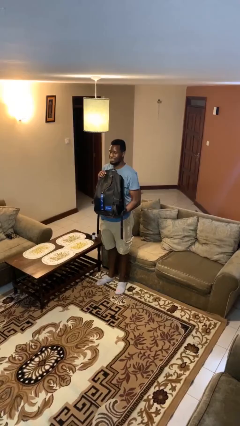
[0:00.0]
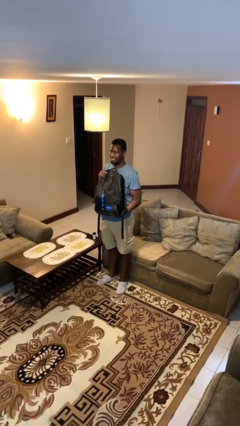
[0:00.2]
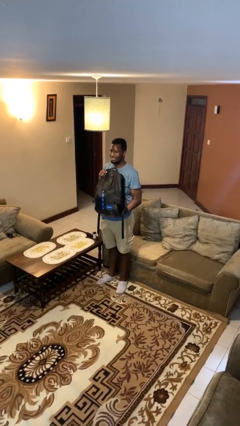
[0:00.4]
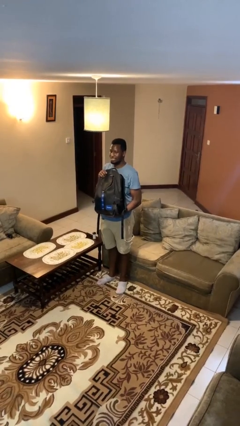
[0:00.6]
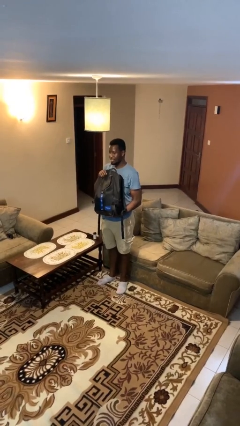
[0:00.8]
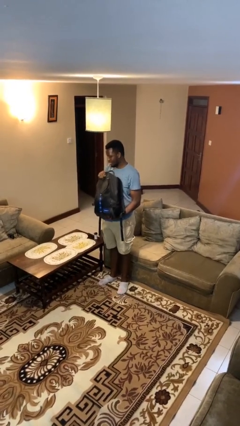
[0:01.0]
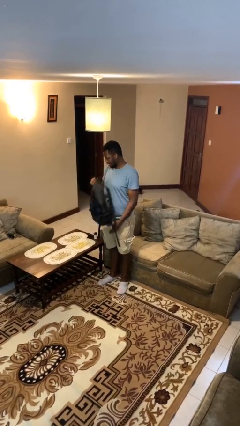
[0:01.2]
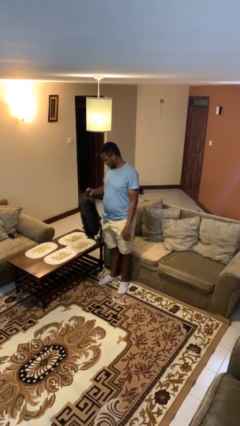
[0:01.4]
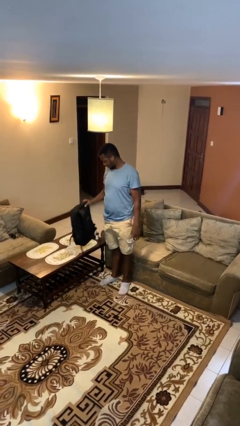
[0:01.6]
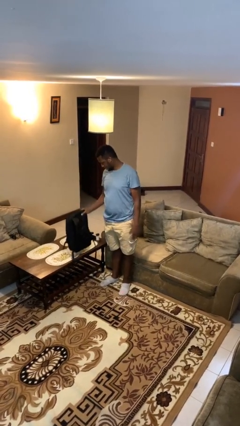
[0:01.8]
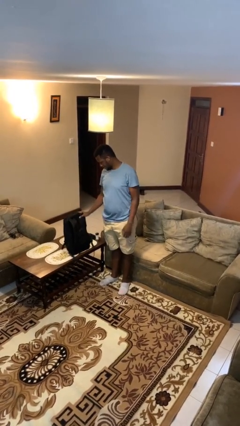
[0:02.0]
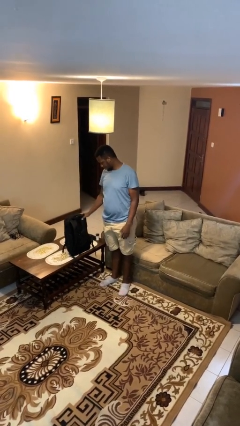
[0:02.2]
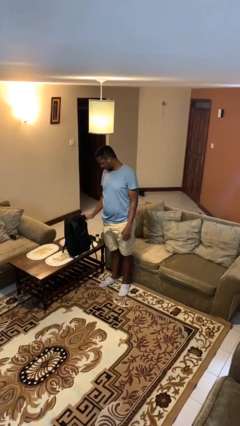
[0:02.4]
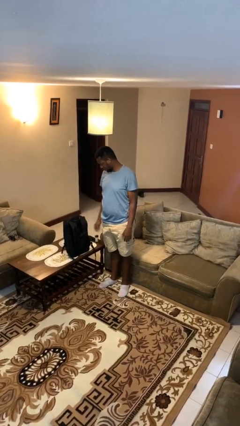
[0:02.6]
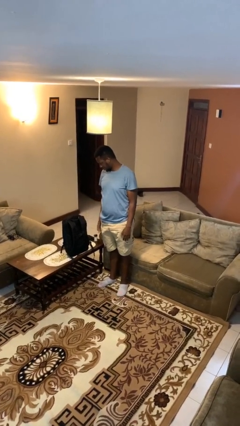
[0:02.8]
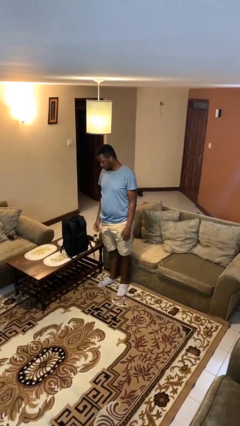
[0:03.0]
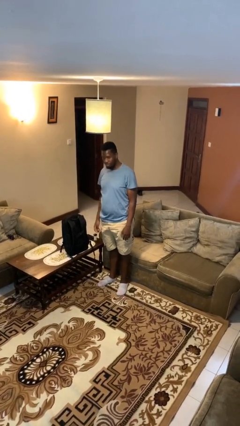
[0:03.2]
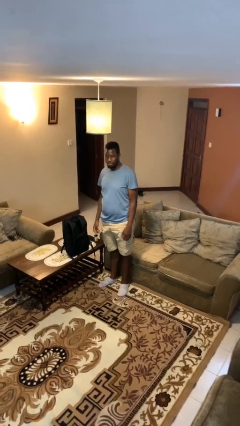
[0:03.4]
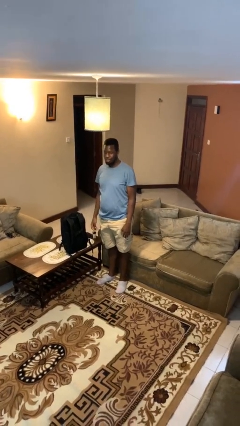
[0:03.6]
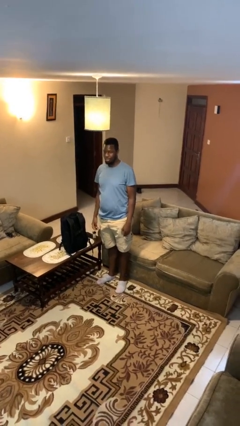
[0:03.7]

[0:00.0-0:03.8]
person puts down object on table

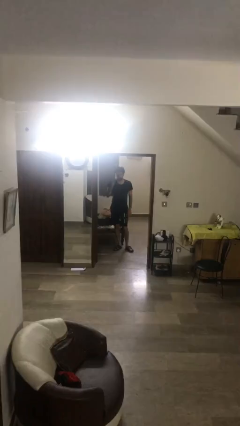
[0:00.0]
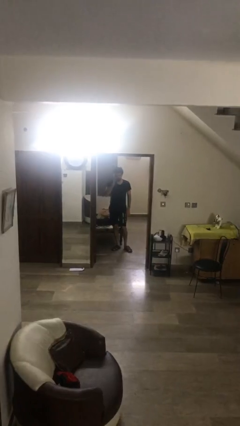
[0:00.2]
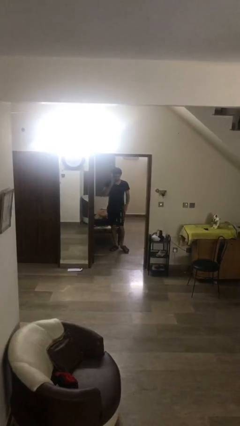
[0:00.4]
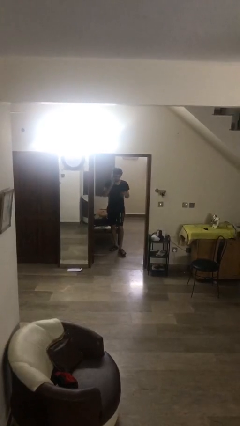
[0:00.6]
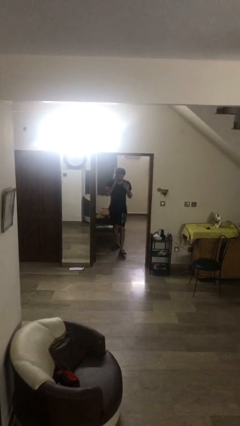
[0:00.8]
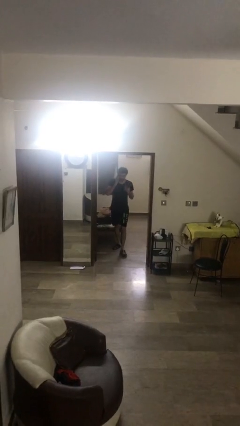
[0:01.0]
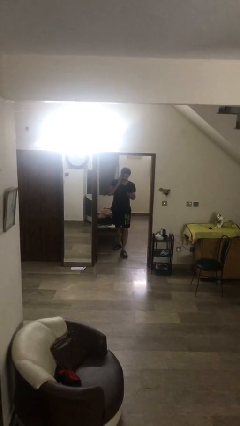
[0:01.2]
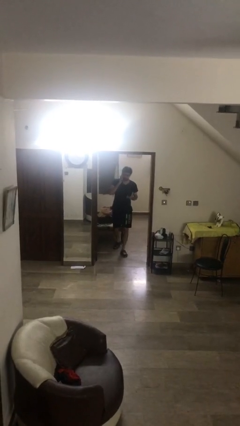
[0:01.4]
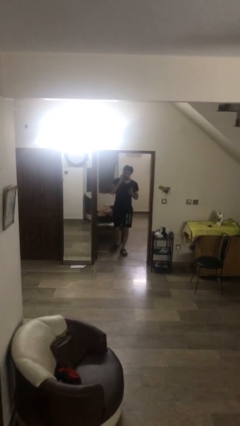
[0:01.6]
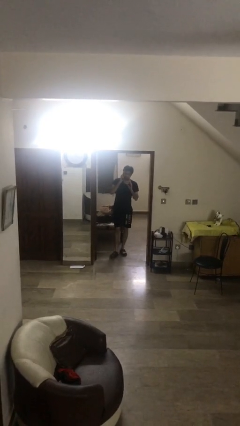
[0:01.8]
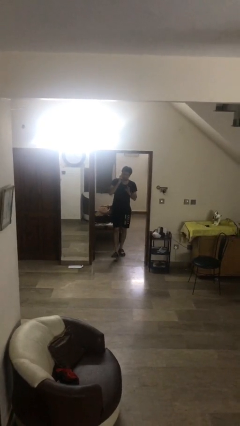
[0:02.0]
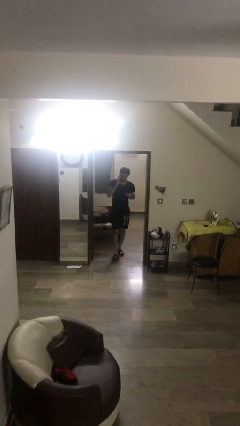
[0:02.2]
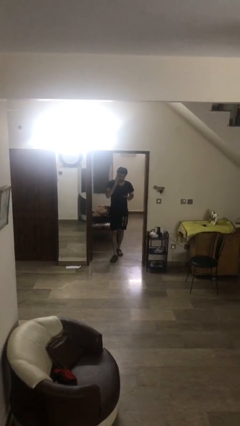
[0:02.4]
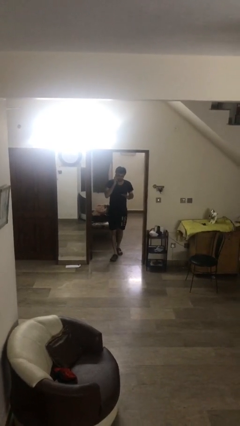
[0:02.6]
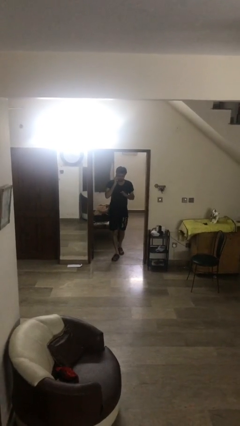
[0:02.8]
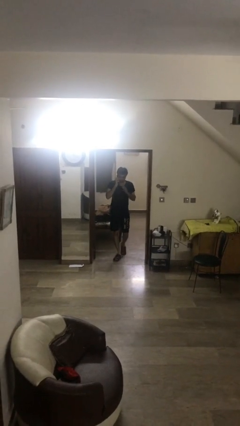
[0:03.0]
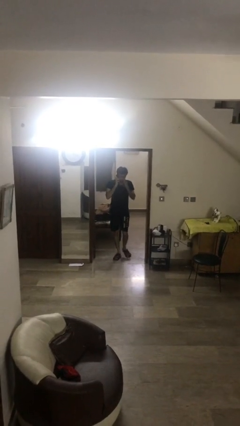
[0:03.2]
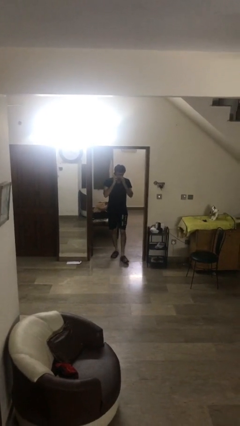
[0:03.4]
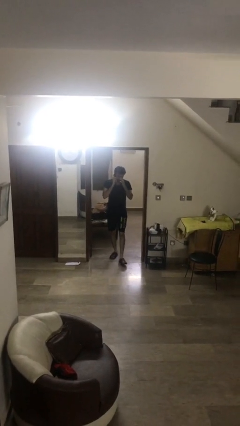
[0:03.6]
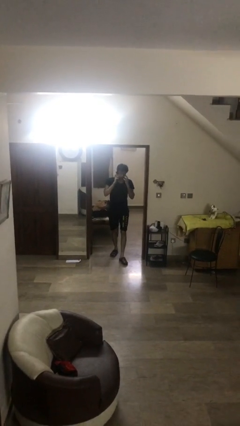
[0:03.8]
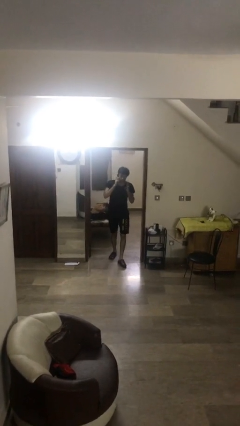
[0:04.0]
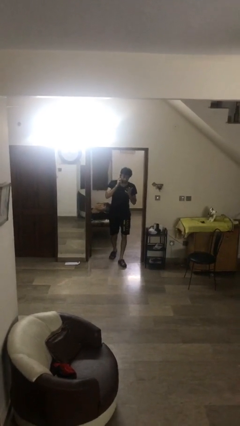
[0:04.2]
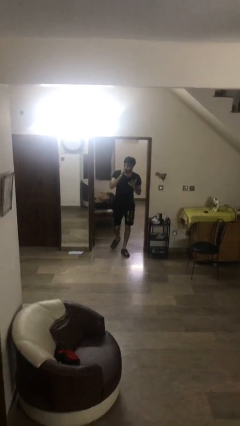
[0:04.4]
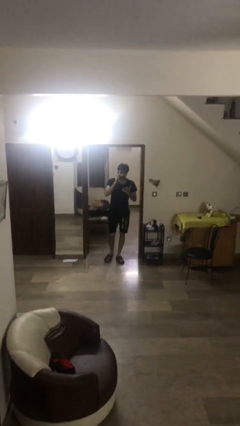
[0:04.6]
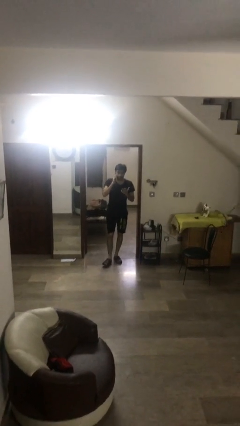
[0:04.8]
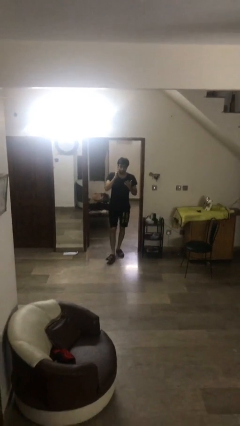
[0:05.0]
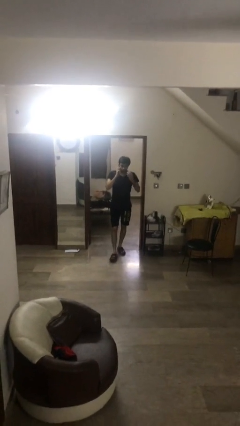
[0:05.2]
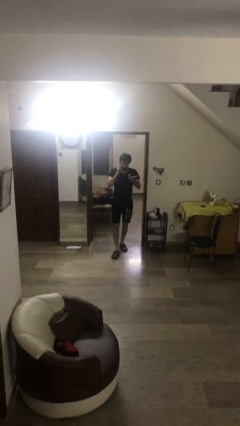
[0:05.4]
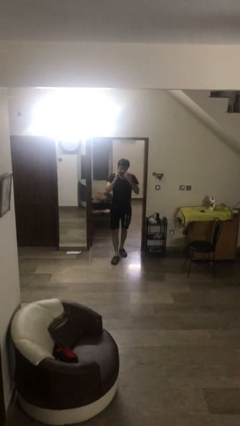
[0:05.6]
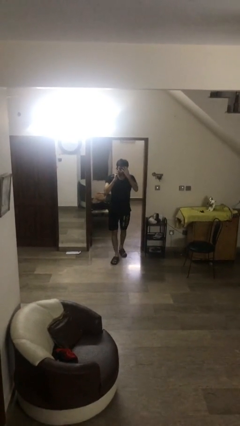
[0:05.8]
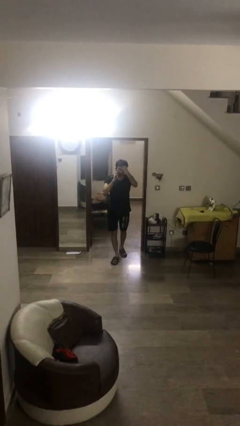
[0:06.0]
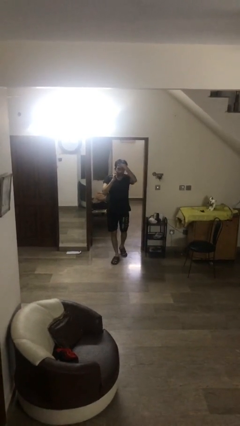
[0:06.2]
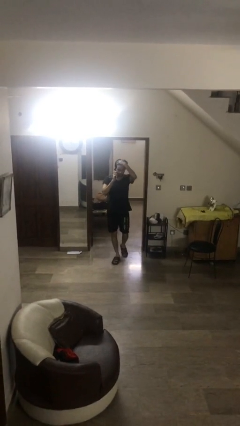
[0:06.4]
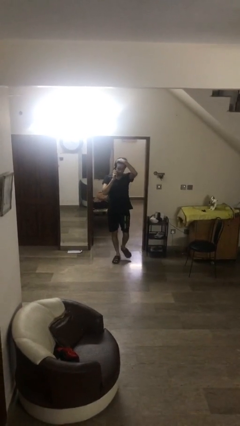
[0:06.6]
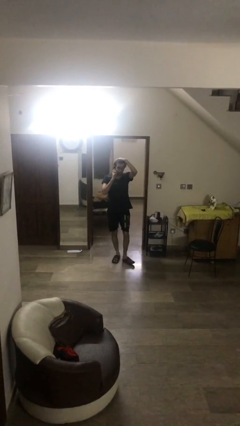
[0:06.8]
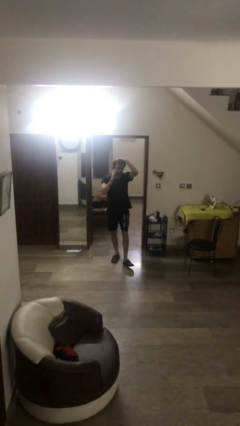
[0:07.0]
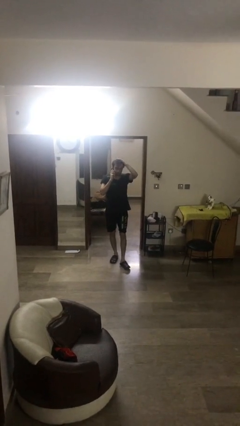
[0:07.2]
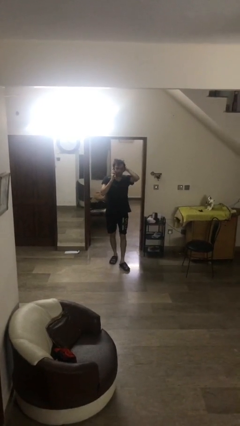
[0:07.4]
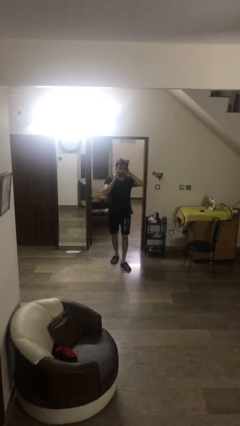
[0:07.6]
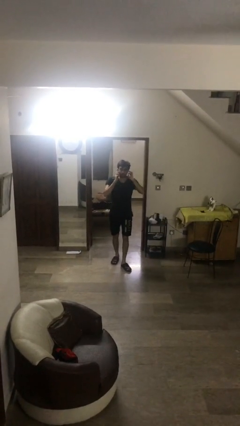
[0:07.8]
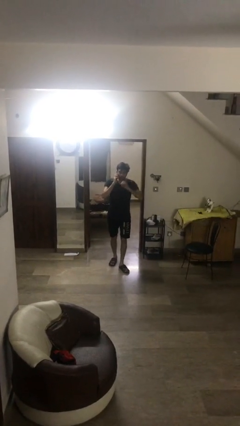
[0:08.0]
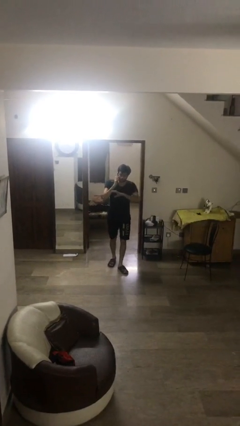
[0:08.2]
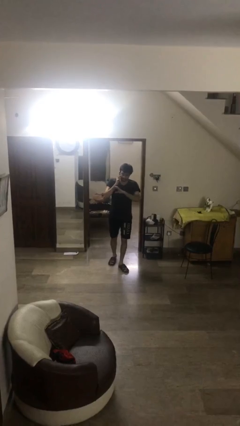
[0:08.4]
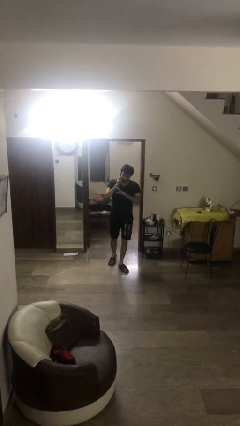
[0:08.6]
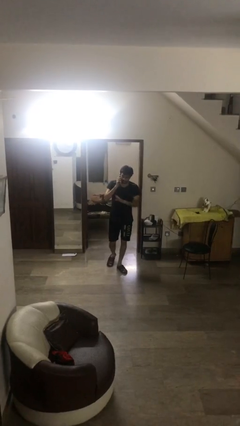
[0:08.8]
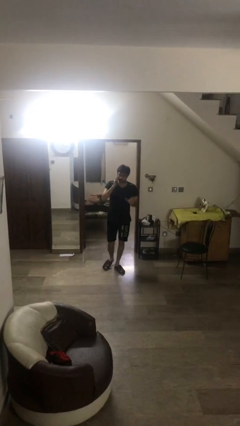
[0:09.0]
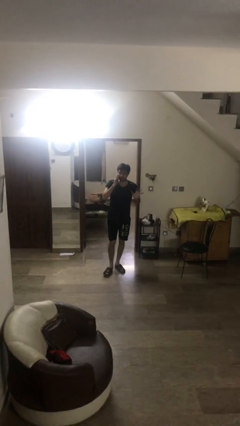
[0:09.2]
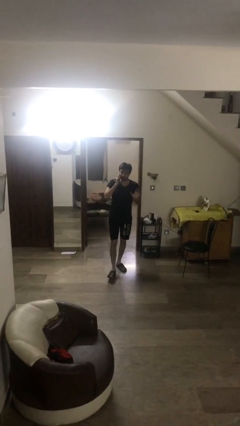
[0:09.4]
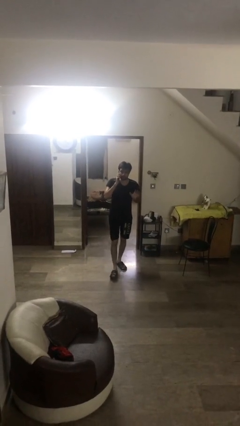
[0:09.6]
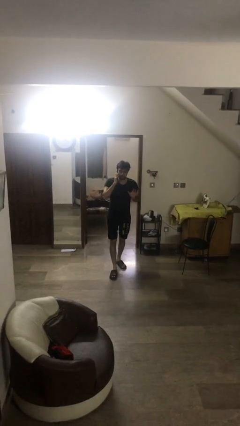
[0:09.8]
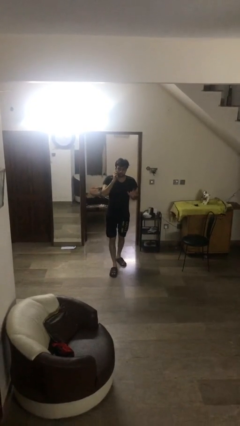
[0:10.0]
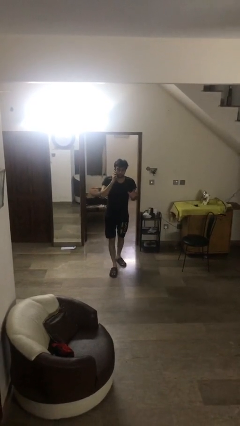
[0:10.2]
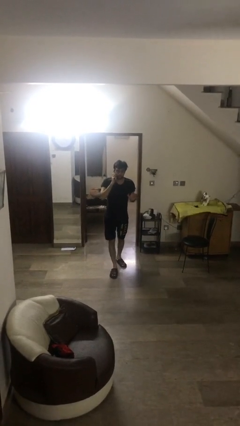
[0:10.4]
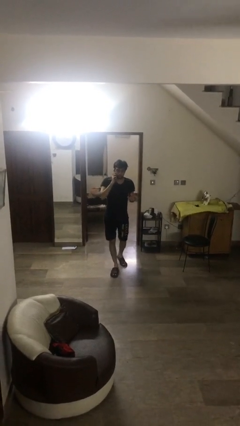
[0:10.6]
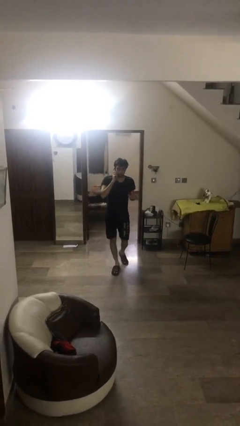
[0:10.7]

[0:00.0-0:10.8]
person enters scene through structure

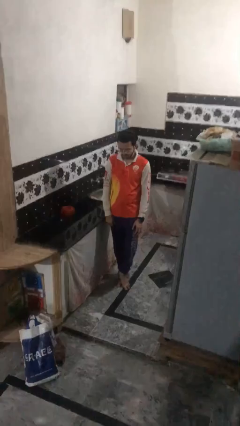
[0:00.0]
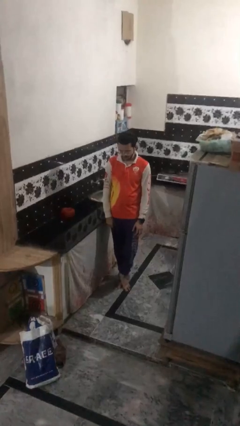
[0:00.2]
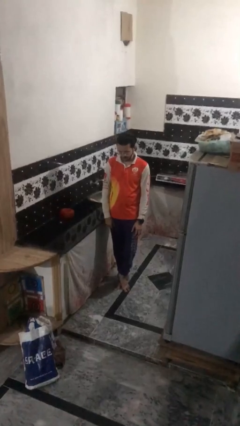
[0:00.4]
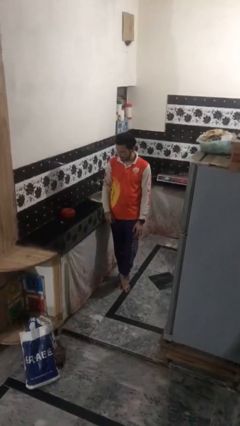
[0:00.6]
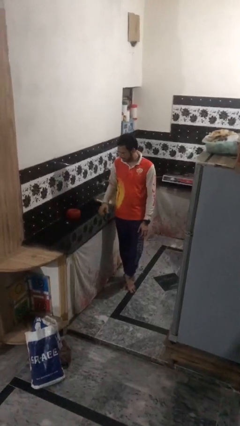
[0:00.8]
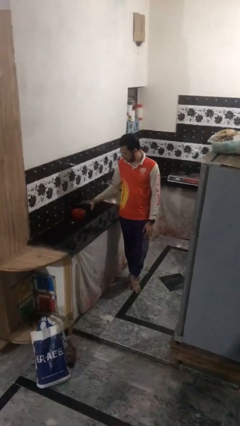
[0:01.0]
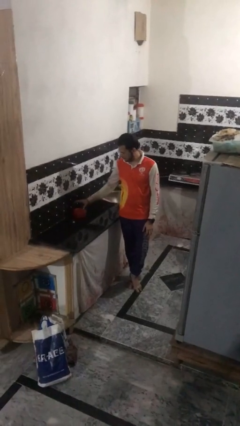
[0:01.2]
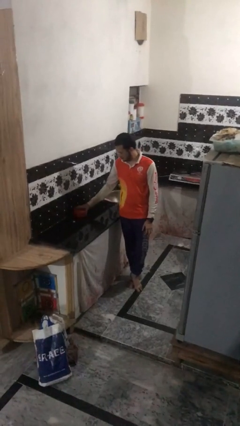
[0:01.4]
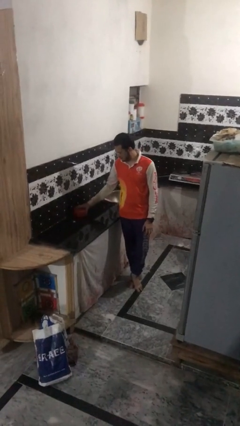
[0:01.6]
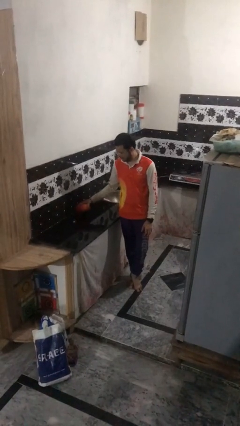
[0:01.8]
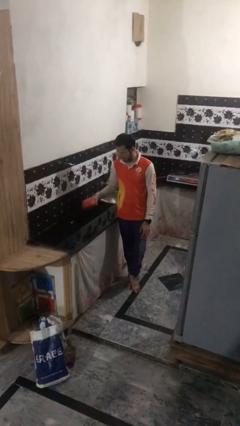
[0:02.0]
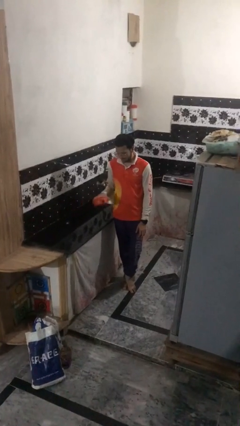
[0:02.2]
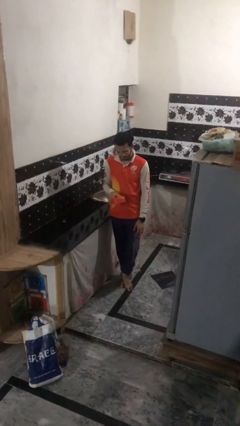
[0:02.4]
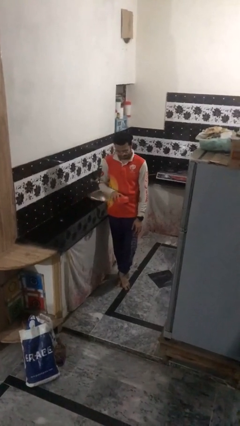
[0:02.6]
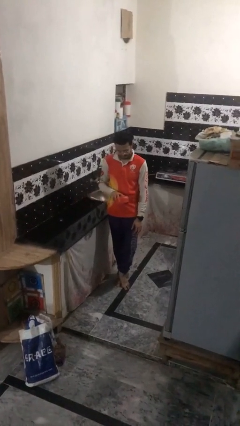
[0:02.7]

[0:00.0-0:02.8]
person picks up object from countertop

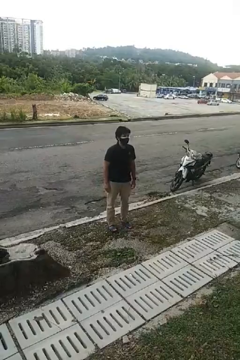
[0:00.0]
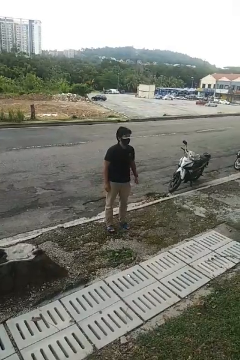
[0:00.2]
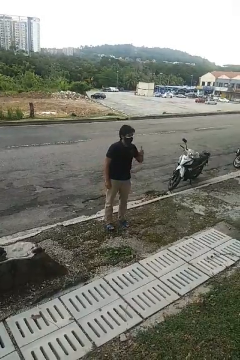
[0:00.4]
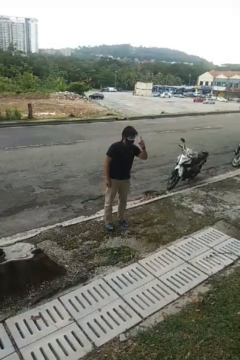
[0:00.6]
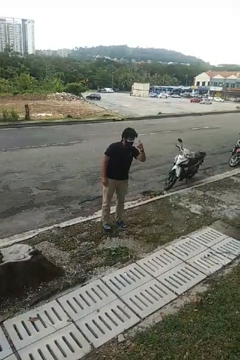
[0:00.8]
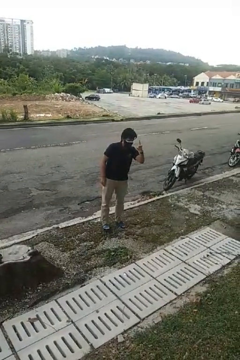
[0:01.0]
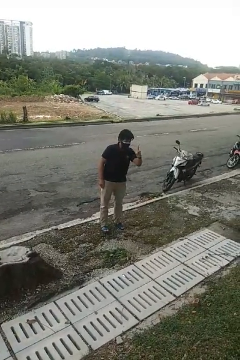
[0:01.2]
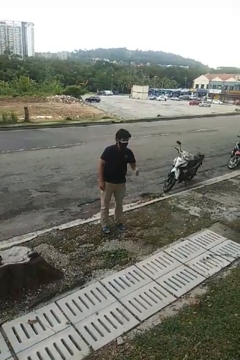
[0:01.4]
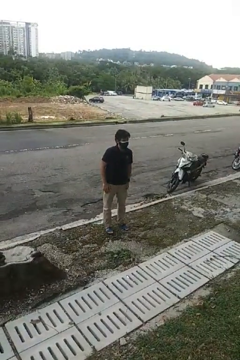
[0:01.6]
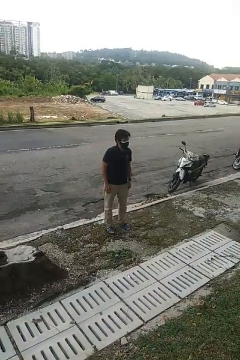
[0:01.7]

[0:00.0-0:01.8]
person gestures number one
